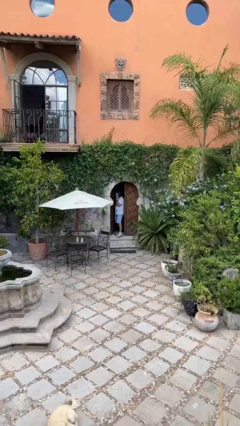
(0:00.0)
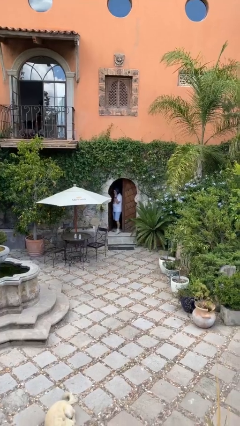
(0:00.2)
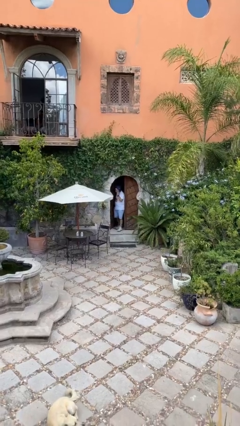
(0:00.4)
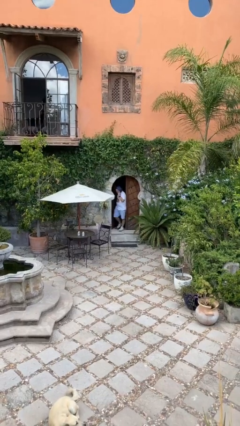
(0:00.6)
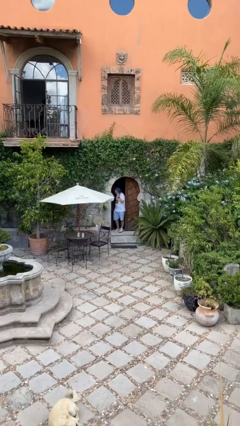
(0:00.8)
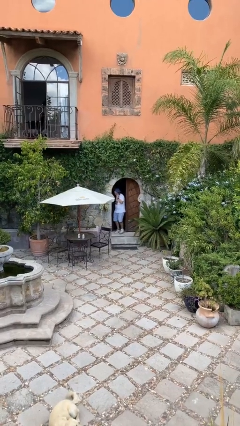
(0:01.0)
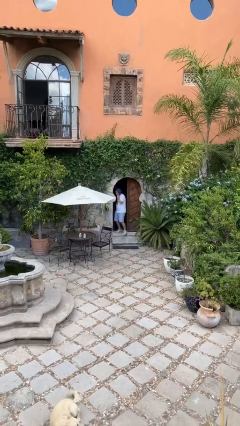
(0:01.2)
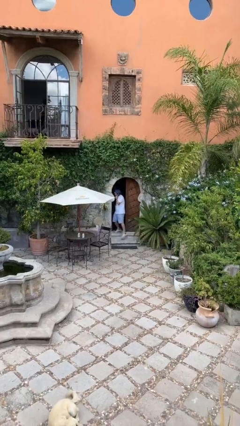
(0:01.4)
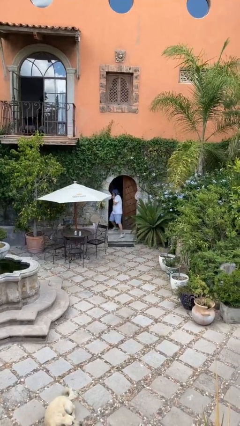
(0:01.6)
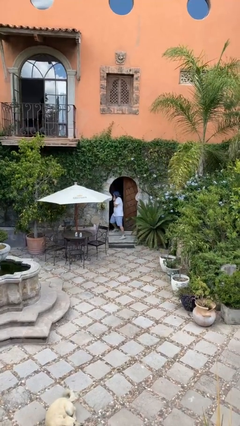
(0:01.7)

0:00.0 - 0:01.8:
person enters scene through structure

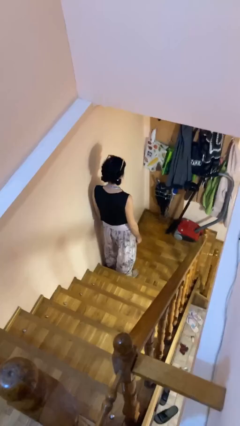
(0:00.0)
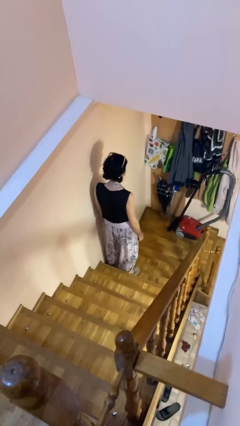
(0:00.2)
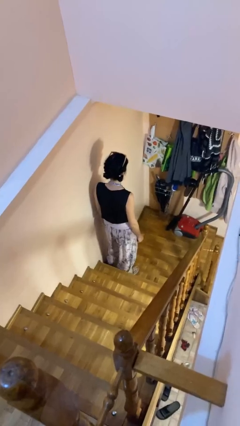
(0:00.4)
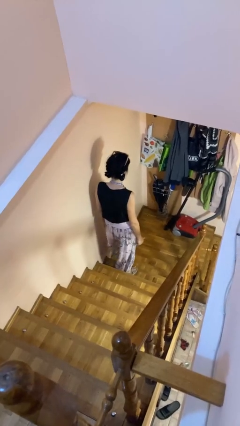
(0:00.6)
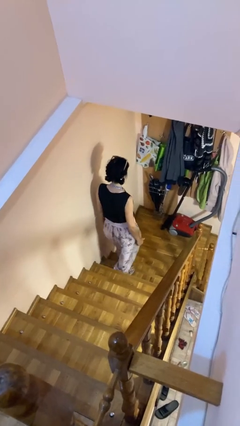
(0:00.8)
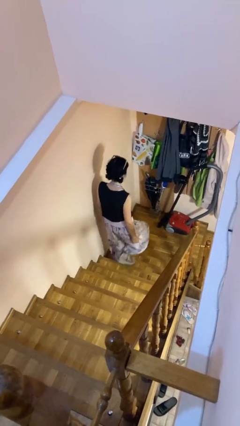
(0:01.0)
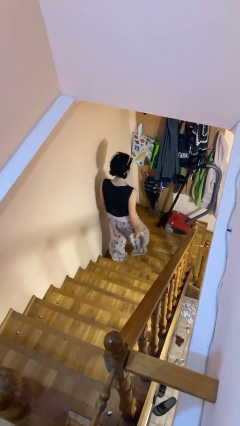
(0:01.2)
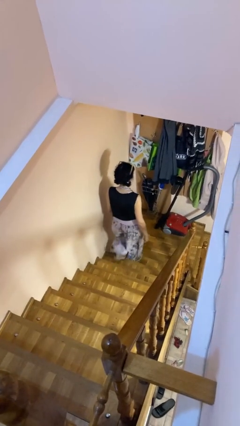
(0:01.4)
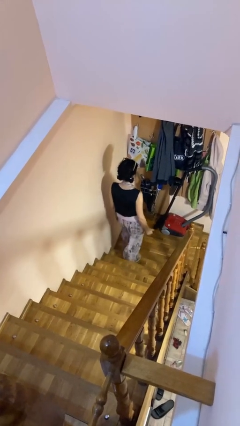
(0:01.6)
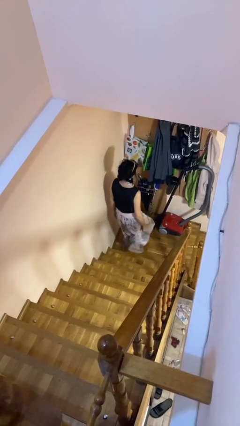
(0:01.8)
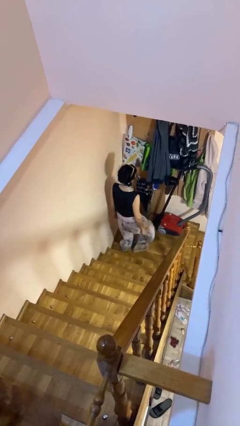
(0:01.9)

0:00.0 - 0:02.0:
person climbs down stairs

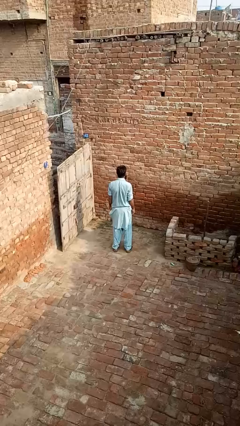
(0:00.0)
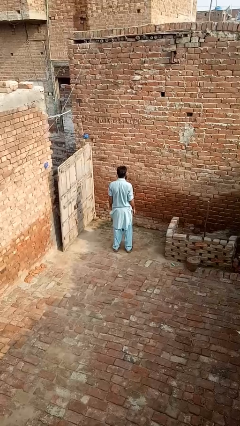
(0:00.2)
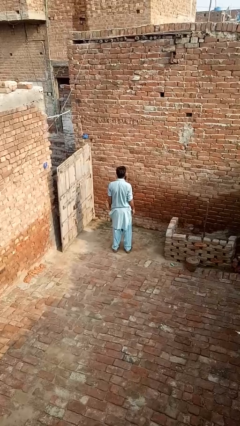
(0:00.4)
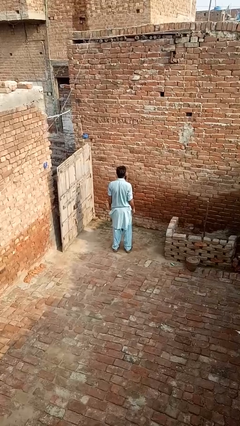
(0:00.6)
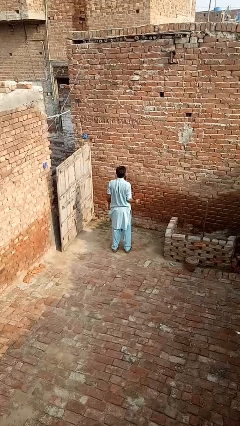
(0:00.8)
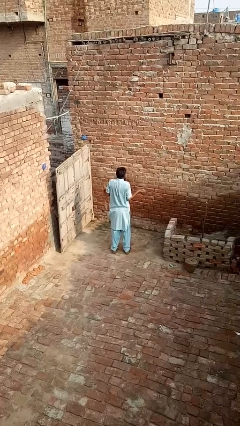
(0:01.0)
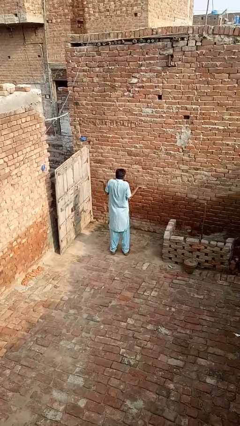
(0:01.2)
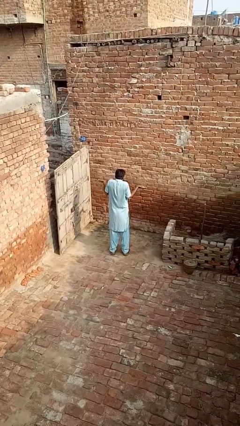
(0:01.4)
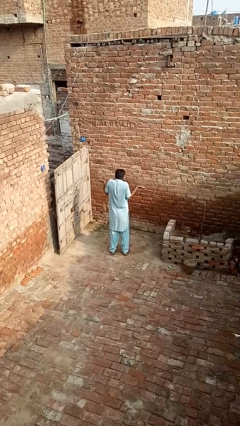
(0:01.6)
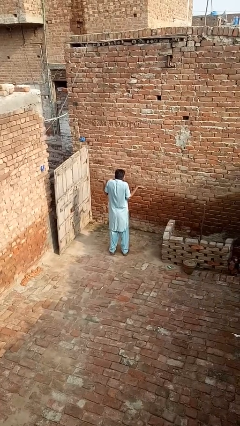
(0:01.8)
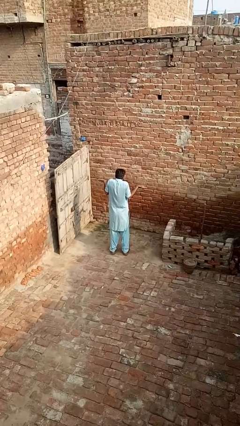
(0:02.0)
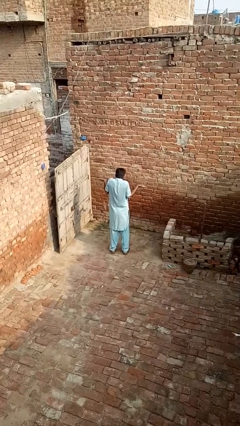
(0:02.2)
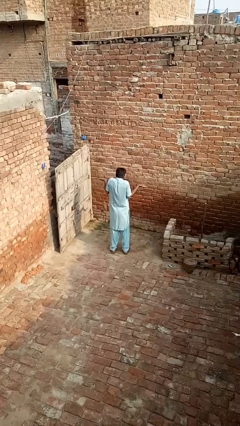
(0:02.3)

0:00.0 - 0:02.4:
person shrugs

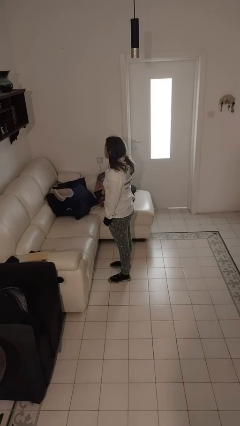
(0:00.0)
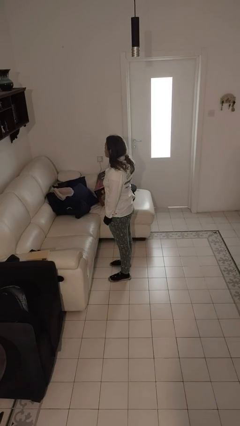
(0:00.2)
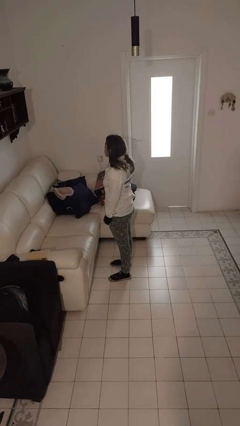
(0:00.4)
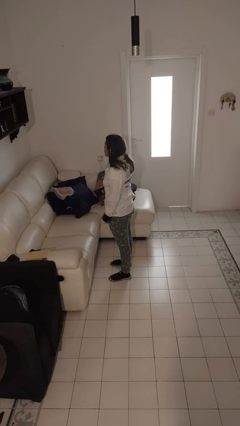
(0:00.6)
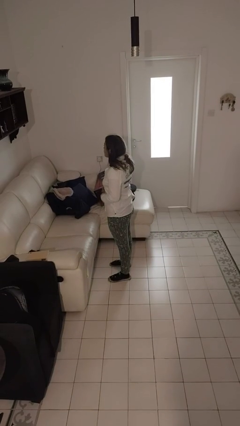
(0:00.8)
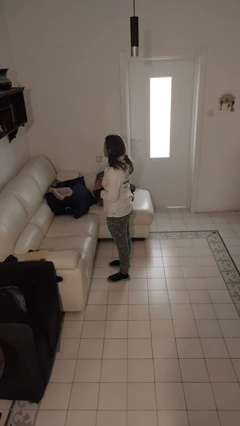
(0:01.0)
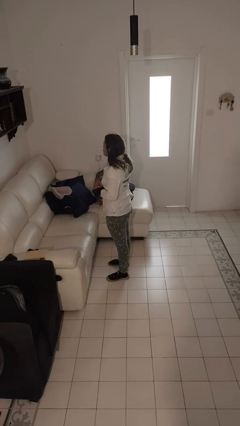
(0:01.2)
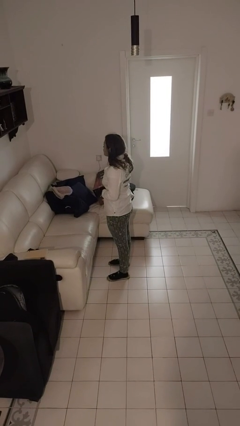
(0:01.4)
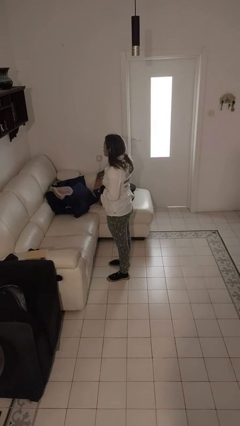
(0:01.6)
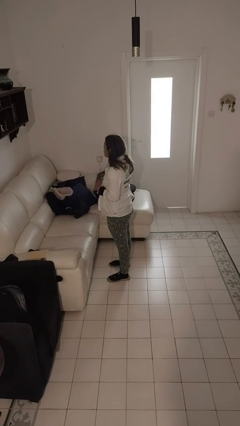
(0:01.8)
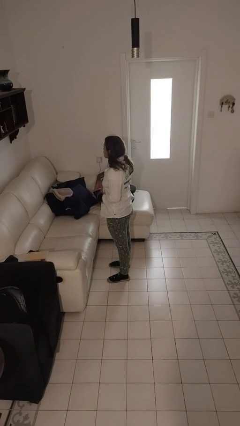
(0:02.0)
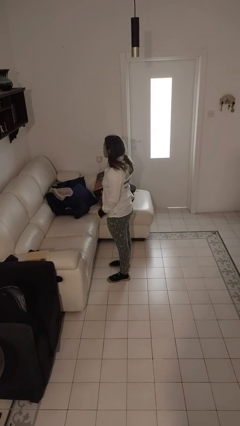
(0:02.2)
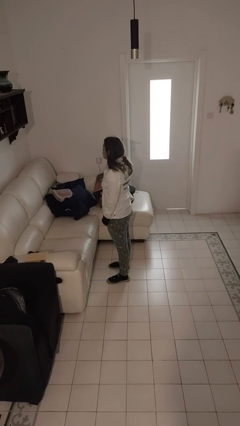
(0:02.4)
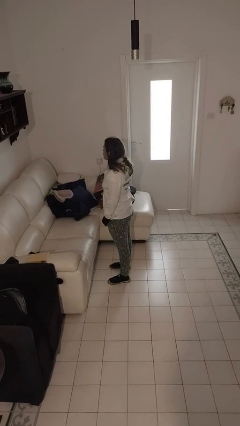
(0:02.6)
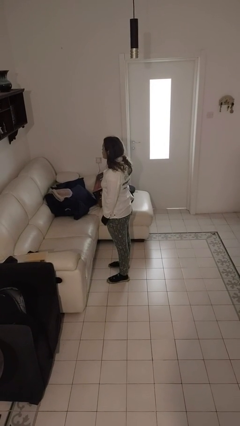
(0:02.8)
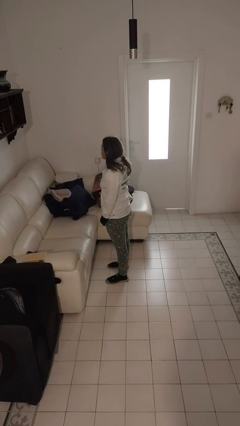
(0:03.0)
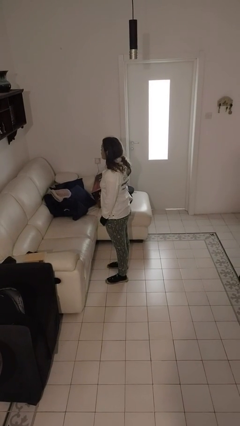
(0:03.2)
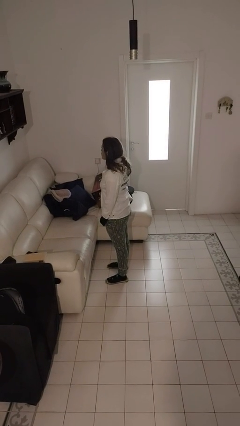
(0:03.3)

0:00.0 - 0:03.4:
person unbuttons shirt

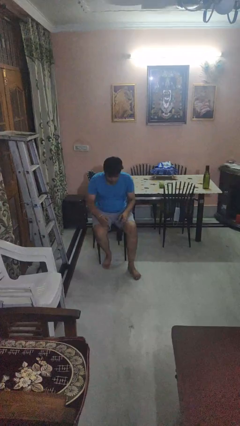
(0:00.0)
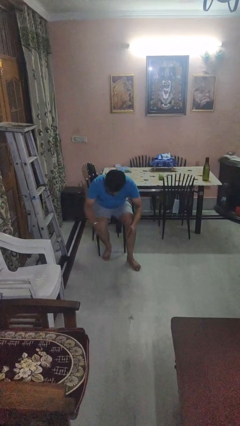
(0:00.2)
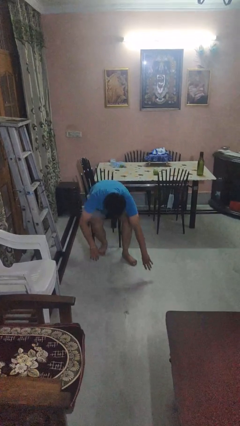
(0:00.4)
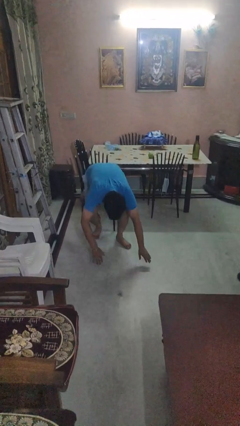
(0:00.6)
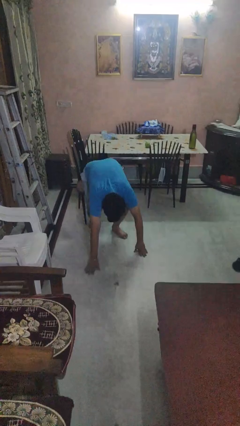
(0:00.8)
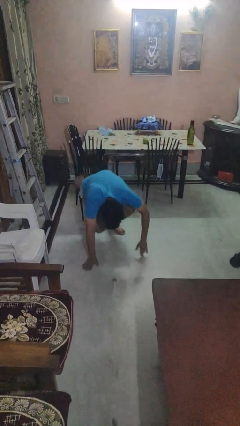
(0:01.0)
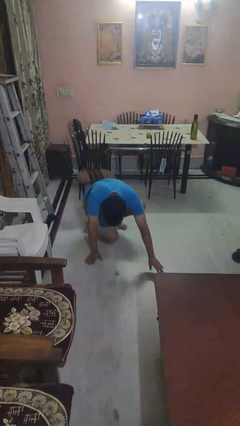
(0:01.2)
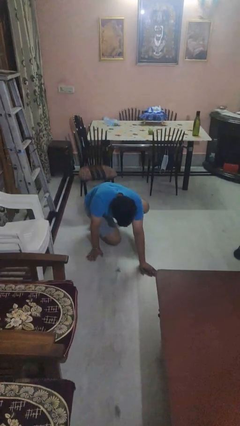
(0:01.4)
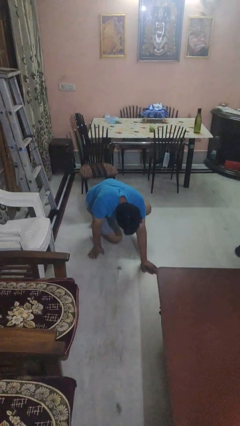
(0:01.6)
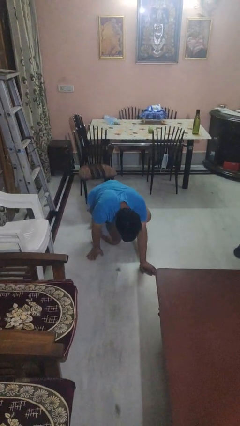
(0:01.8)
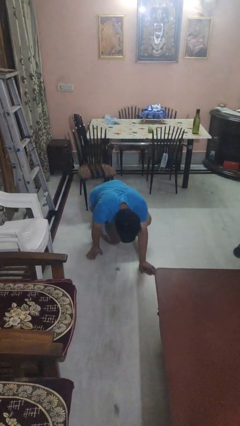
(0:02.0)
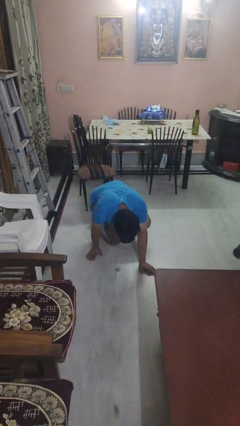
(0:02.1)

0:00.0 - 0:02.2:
person falls while standing

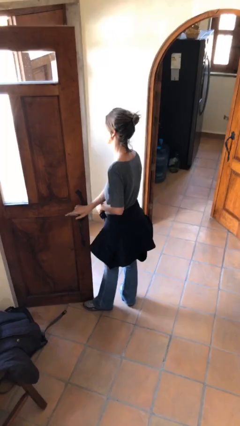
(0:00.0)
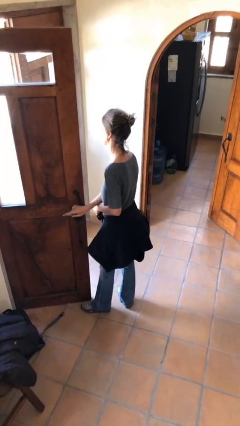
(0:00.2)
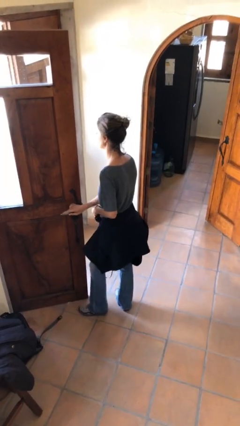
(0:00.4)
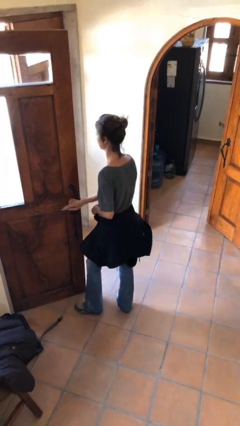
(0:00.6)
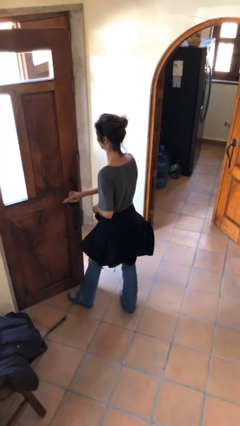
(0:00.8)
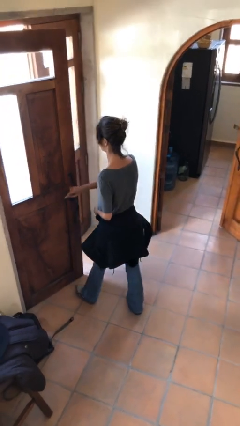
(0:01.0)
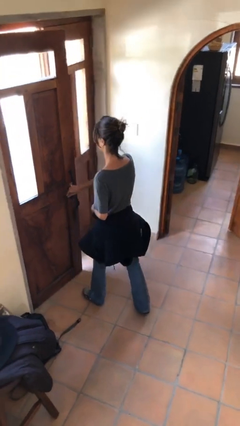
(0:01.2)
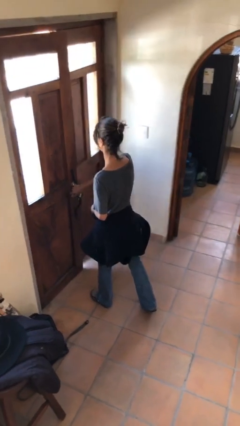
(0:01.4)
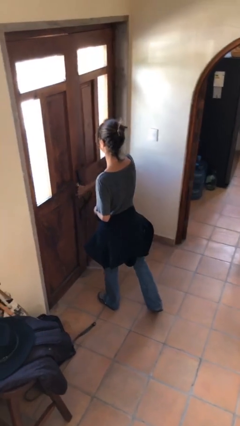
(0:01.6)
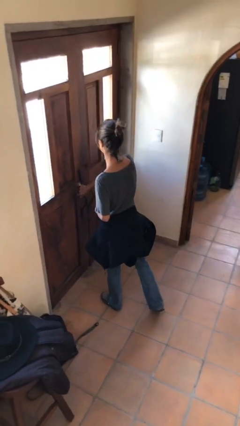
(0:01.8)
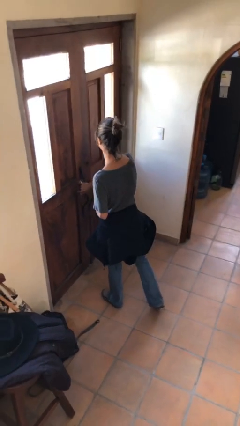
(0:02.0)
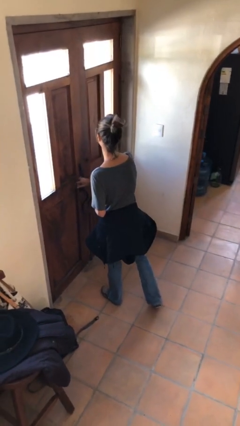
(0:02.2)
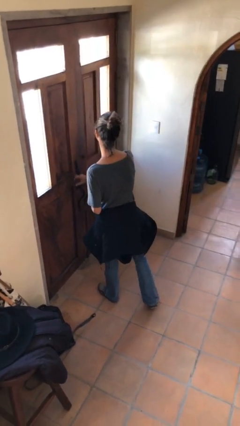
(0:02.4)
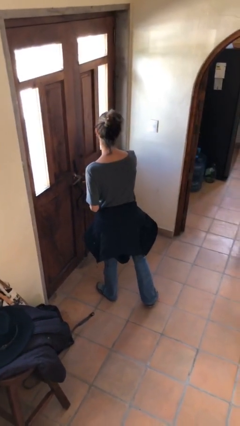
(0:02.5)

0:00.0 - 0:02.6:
person closes facility door

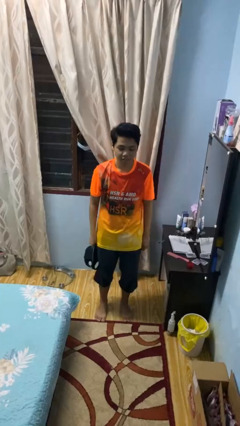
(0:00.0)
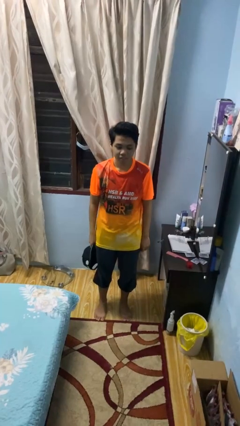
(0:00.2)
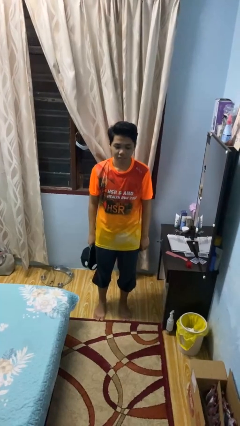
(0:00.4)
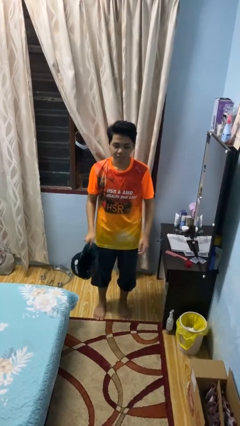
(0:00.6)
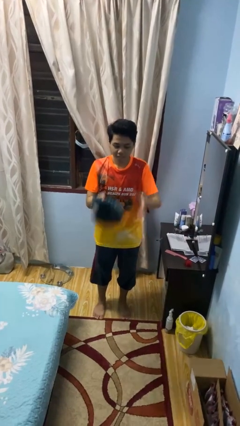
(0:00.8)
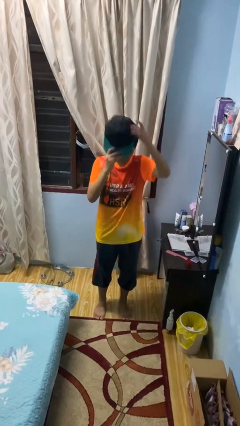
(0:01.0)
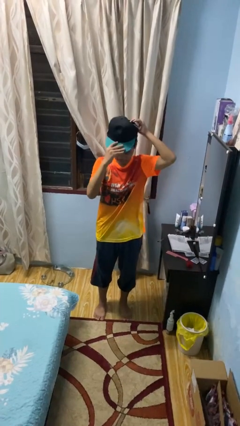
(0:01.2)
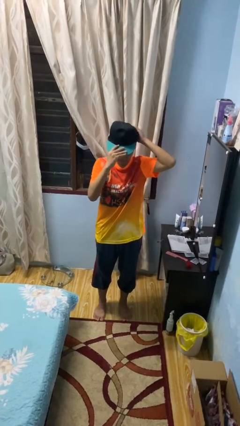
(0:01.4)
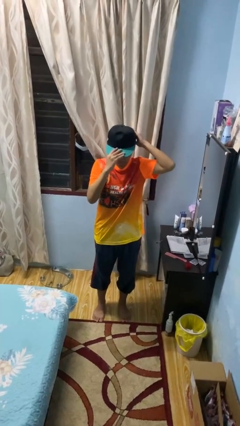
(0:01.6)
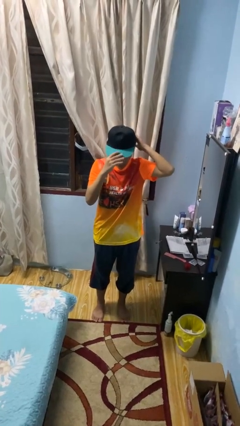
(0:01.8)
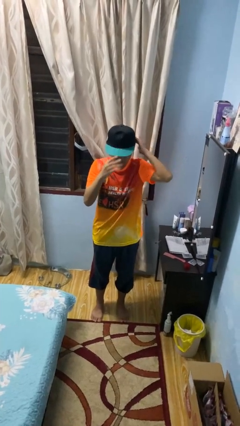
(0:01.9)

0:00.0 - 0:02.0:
person puts on hat

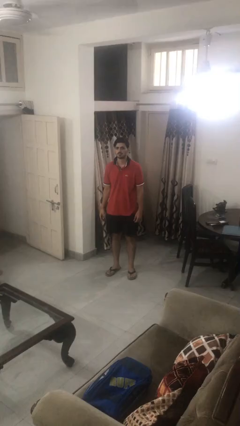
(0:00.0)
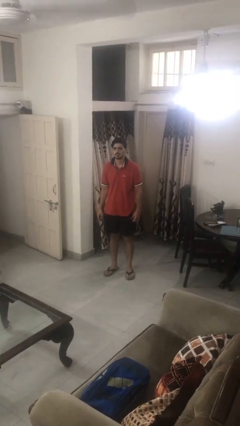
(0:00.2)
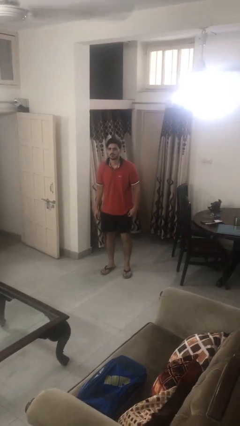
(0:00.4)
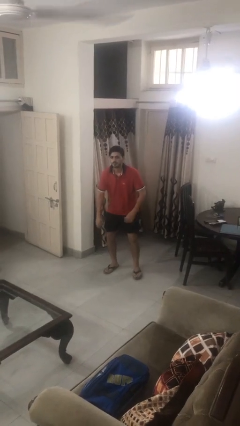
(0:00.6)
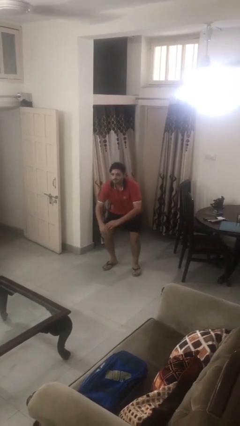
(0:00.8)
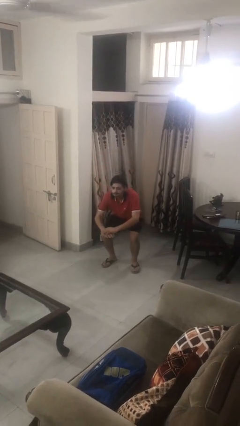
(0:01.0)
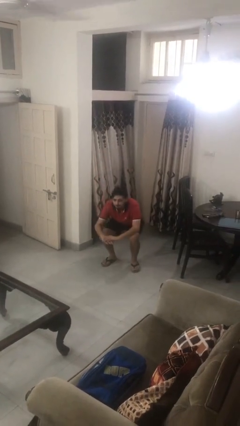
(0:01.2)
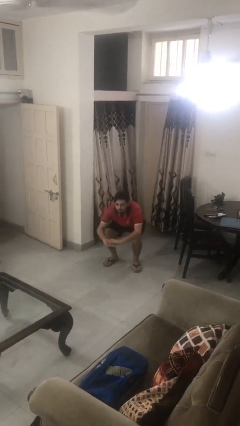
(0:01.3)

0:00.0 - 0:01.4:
person squats
